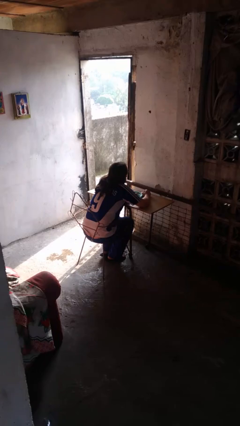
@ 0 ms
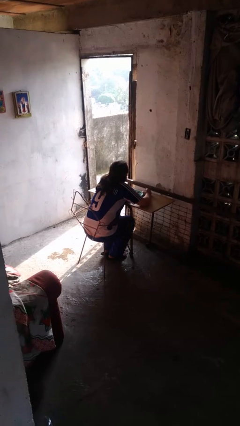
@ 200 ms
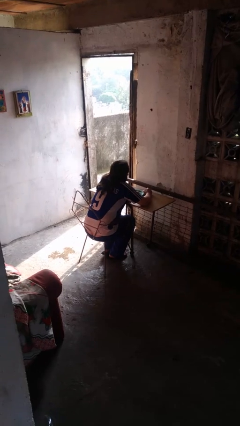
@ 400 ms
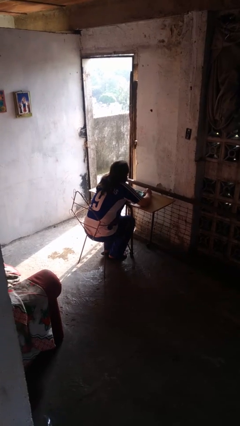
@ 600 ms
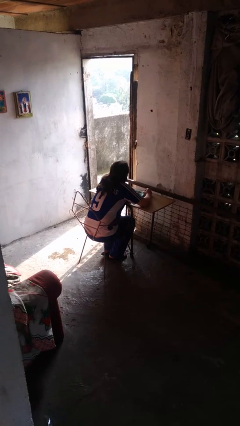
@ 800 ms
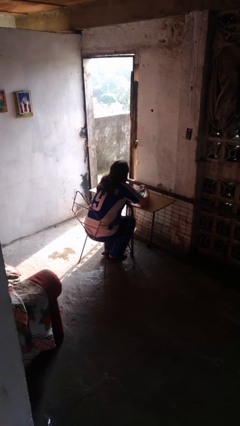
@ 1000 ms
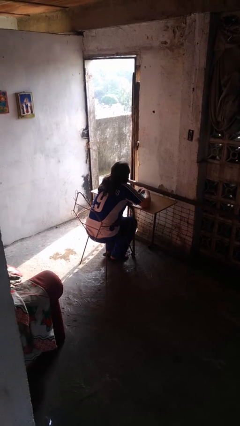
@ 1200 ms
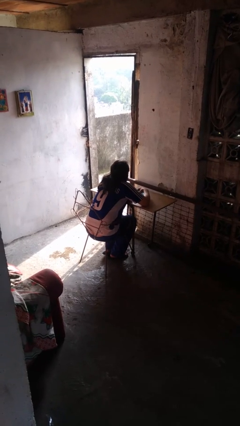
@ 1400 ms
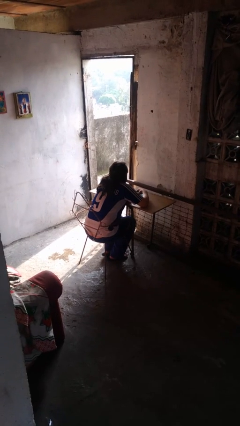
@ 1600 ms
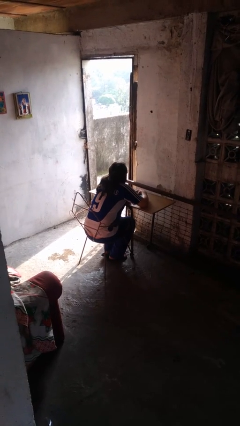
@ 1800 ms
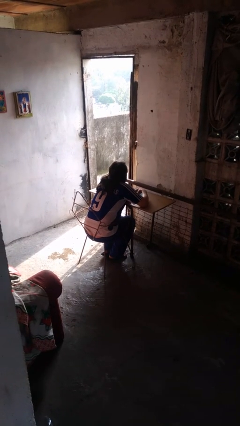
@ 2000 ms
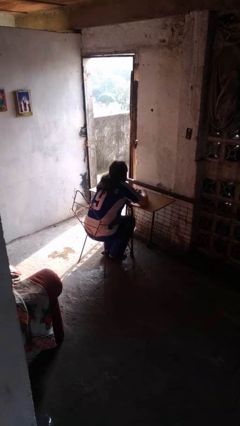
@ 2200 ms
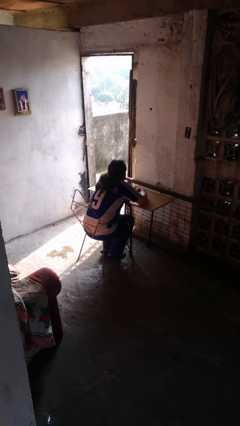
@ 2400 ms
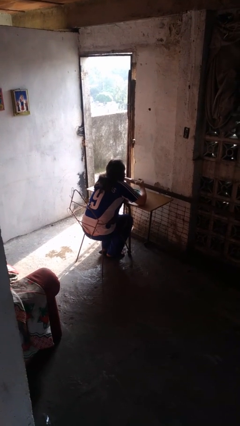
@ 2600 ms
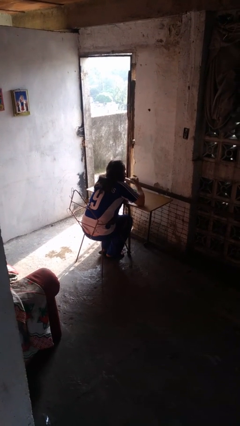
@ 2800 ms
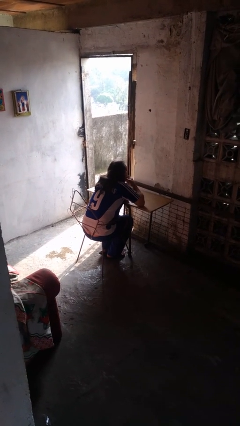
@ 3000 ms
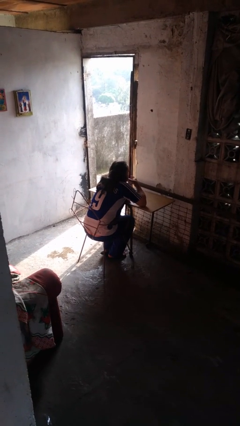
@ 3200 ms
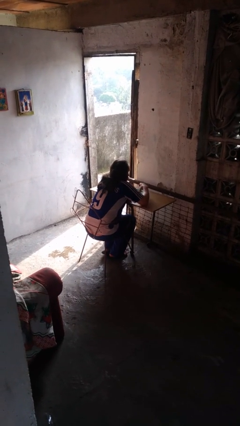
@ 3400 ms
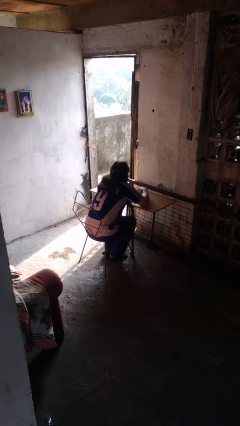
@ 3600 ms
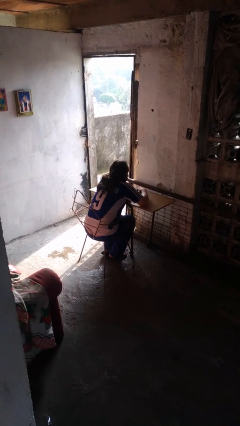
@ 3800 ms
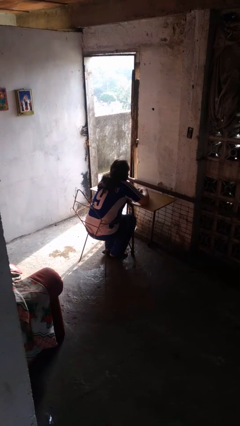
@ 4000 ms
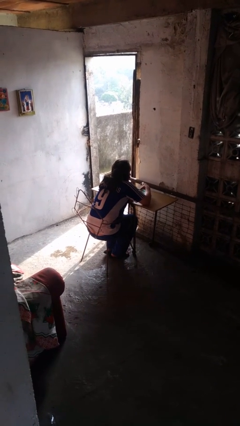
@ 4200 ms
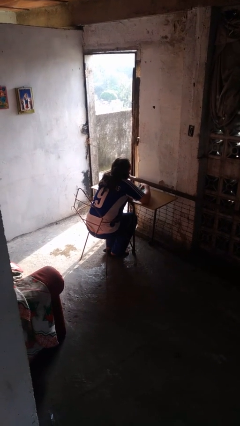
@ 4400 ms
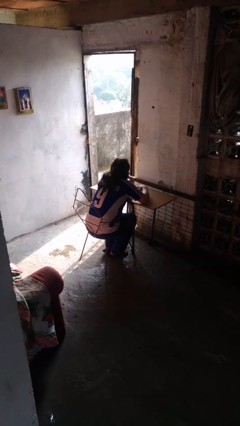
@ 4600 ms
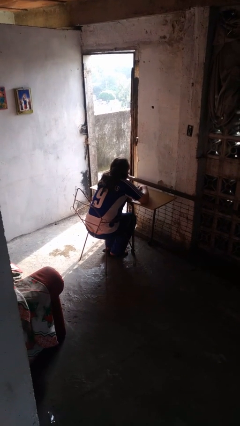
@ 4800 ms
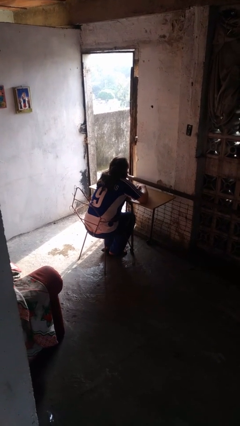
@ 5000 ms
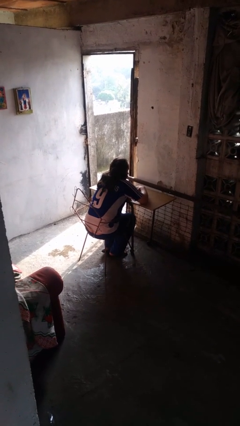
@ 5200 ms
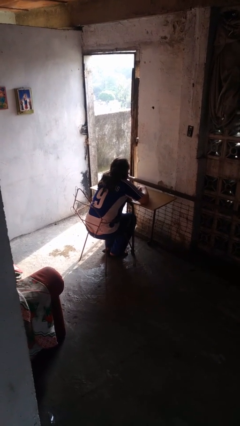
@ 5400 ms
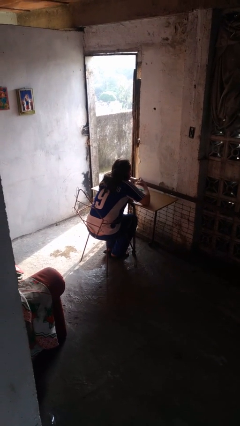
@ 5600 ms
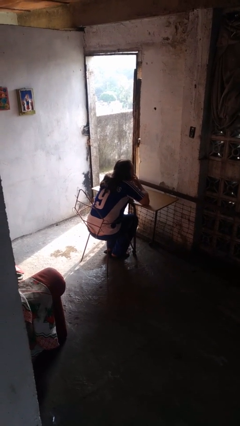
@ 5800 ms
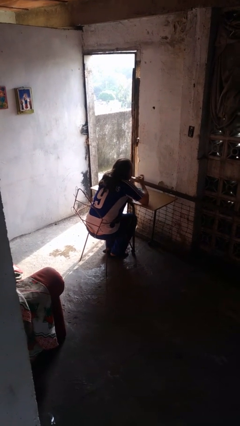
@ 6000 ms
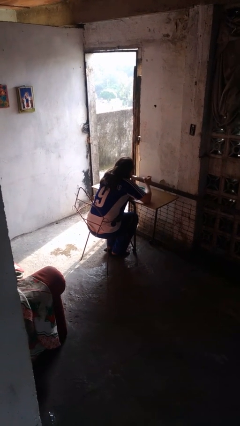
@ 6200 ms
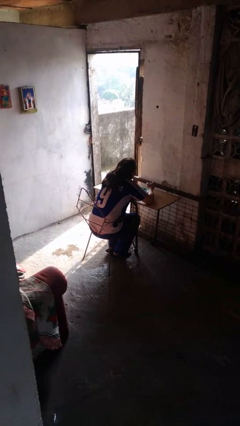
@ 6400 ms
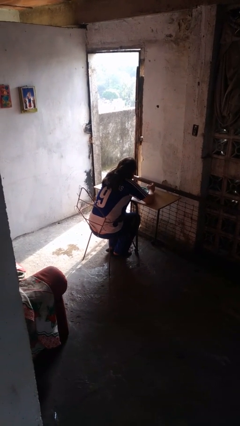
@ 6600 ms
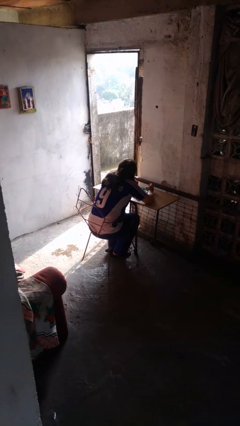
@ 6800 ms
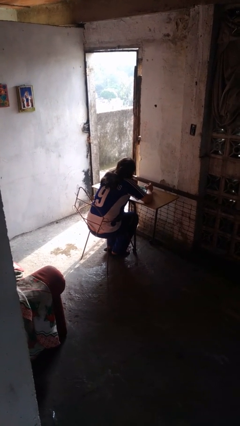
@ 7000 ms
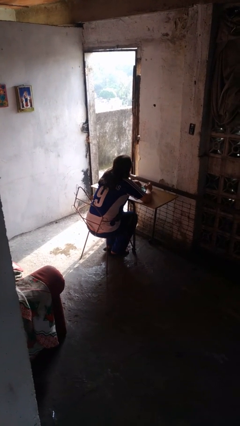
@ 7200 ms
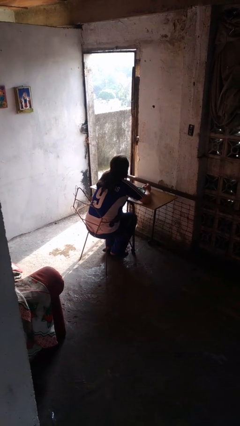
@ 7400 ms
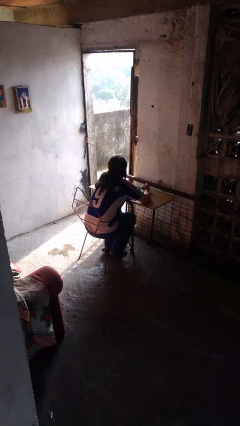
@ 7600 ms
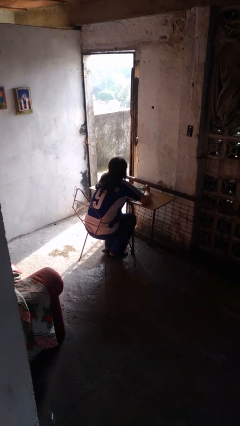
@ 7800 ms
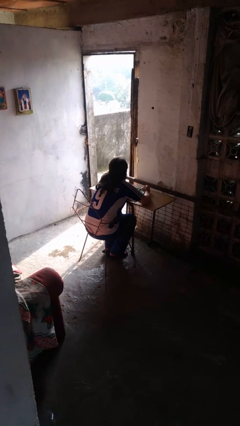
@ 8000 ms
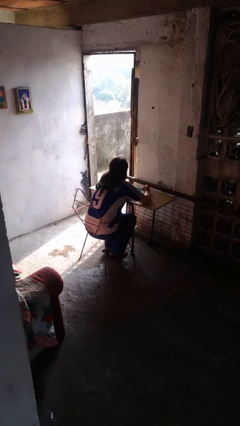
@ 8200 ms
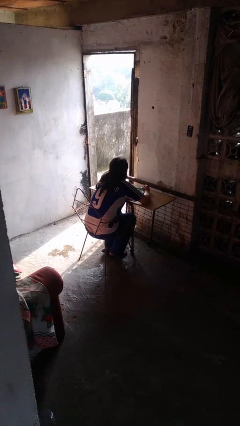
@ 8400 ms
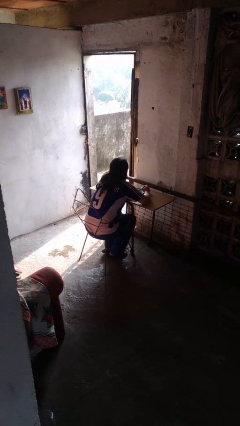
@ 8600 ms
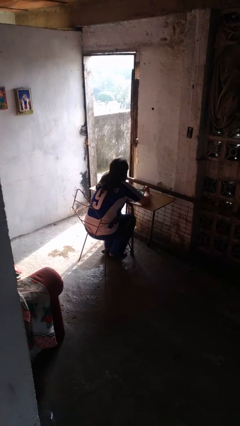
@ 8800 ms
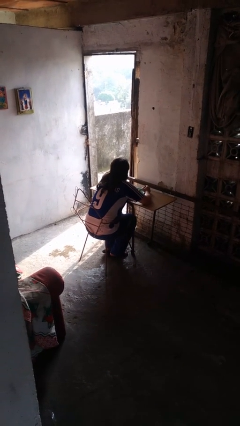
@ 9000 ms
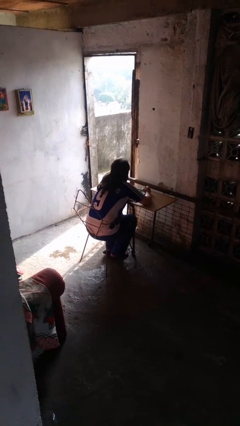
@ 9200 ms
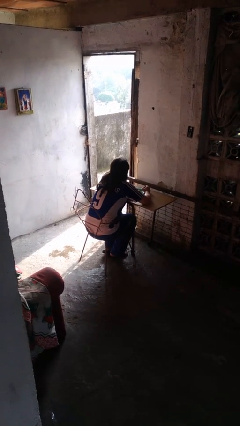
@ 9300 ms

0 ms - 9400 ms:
person eats with hands

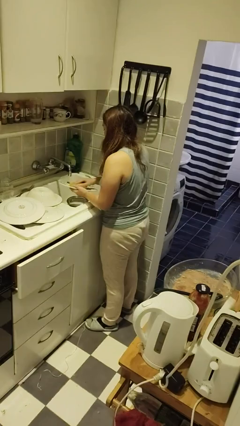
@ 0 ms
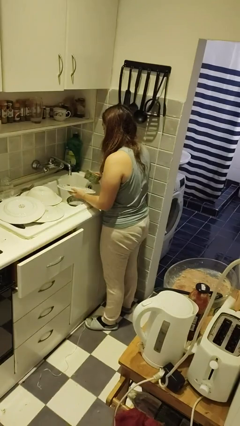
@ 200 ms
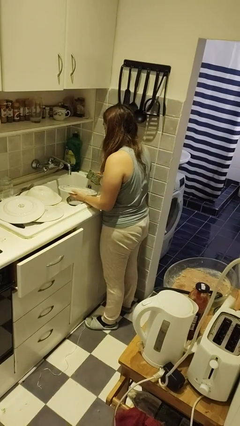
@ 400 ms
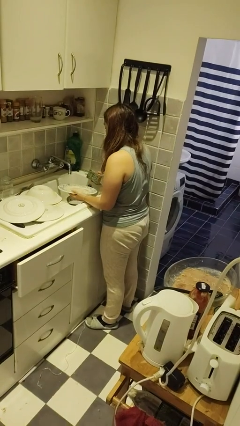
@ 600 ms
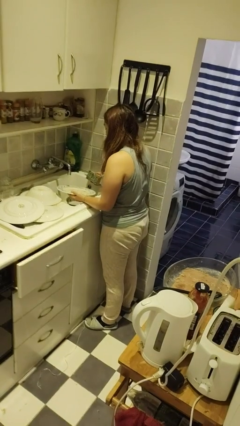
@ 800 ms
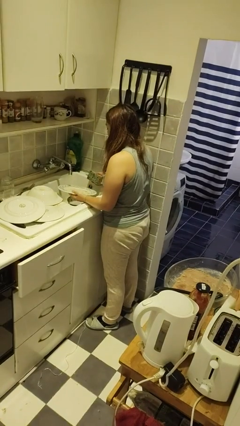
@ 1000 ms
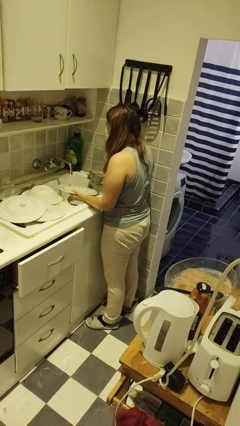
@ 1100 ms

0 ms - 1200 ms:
person washes dish

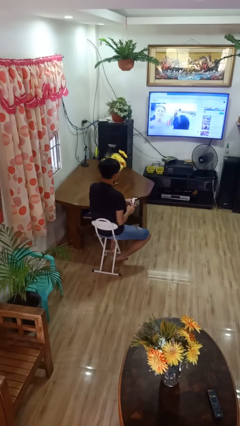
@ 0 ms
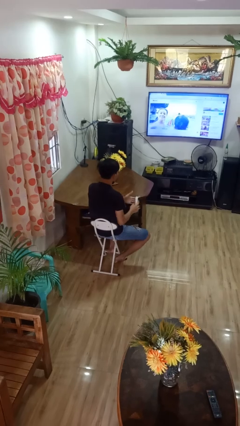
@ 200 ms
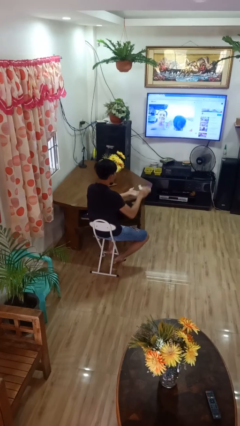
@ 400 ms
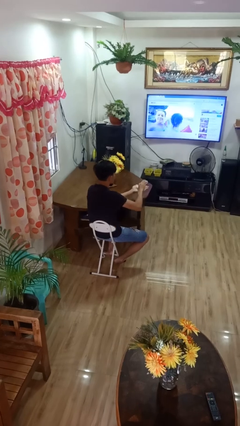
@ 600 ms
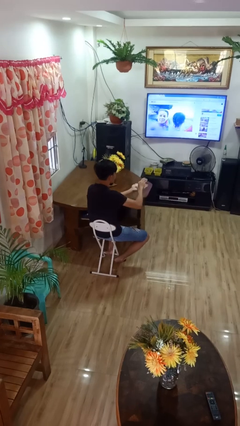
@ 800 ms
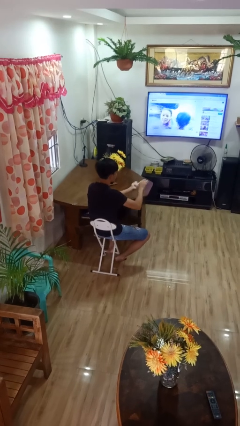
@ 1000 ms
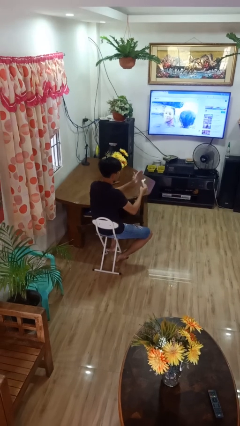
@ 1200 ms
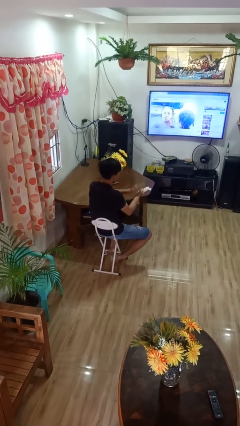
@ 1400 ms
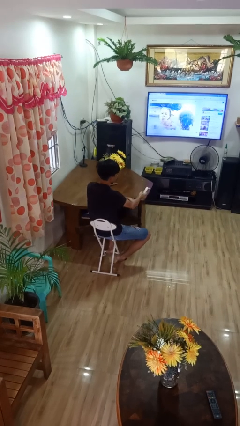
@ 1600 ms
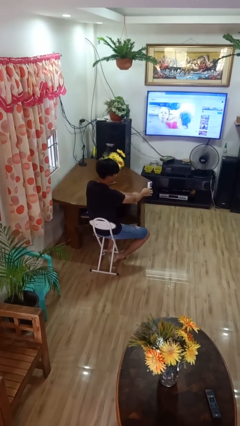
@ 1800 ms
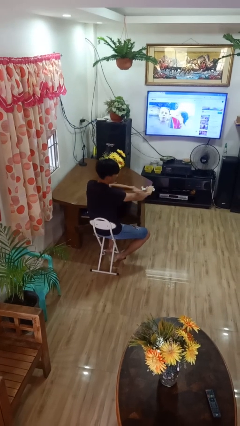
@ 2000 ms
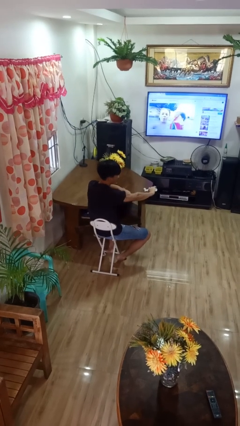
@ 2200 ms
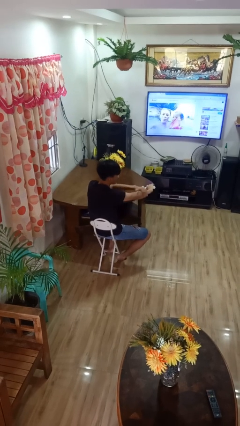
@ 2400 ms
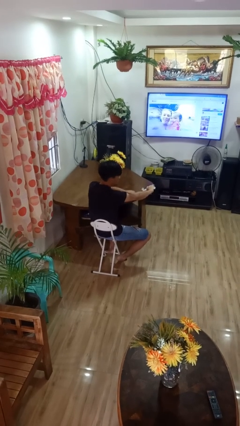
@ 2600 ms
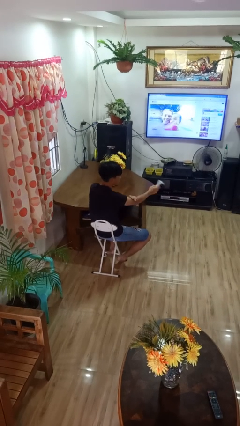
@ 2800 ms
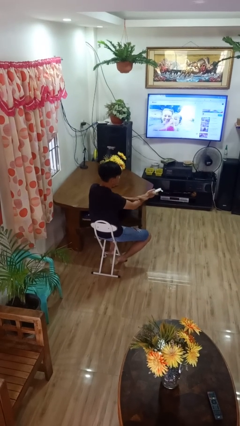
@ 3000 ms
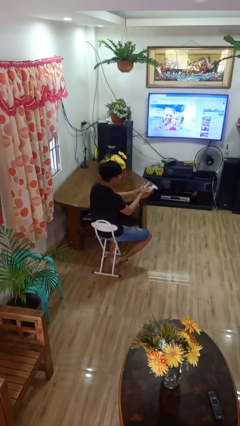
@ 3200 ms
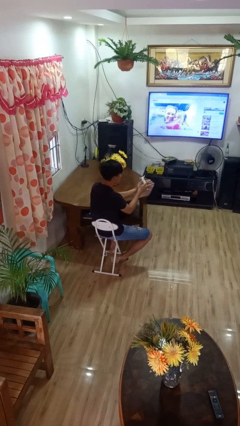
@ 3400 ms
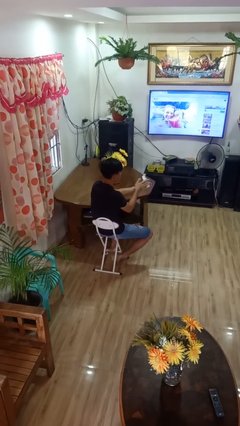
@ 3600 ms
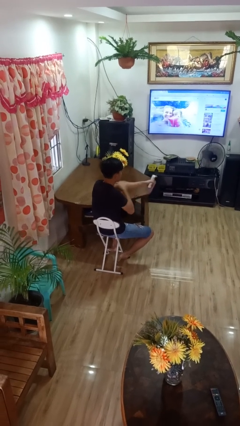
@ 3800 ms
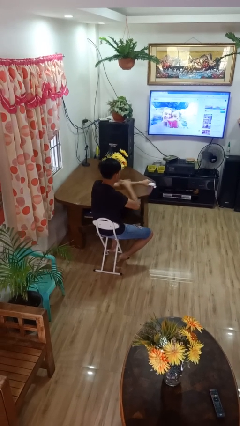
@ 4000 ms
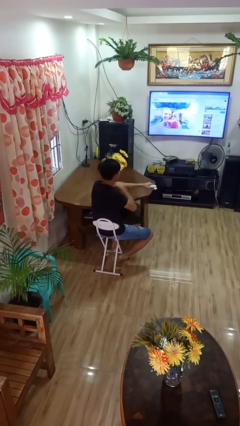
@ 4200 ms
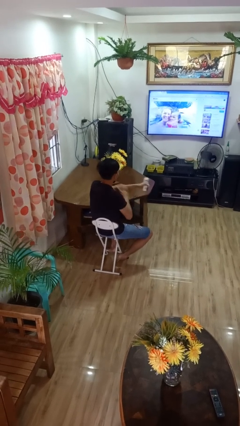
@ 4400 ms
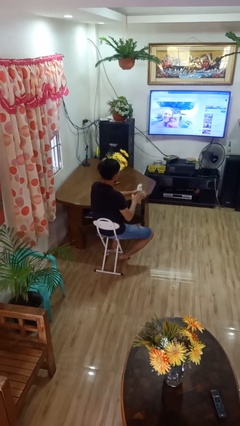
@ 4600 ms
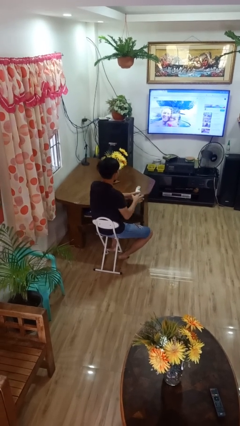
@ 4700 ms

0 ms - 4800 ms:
person applies sunscreen

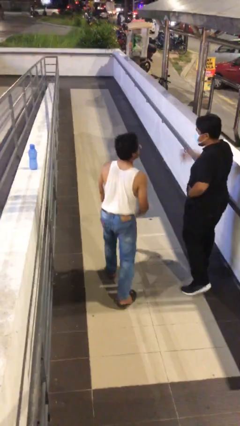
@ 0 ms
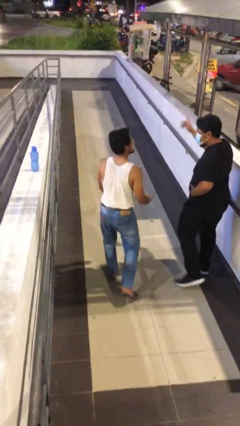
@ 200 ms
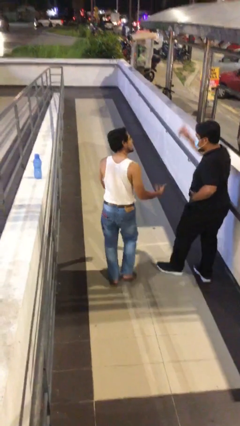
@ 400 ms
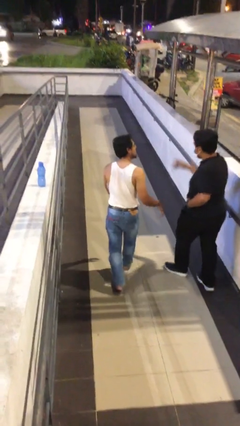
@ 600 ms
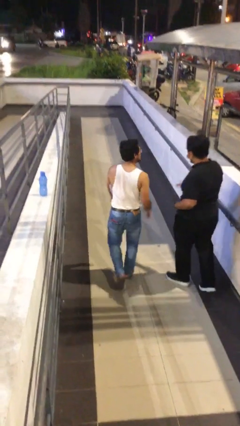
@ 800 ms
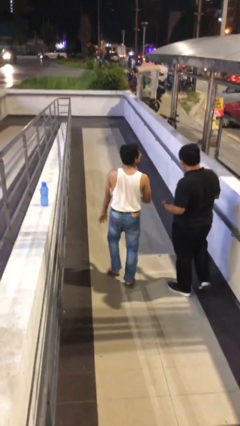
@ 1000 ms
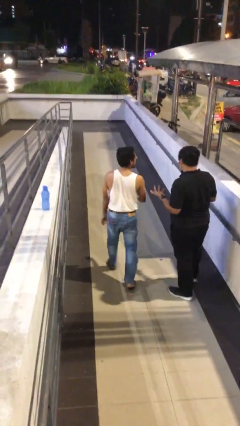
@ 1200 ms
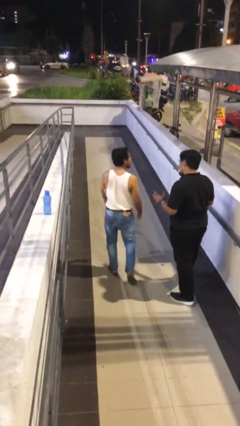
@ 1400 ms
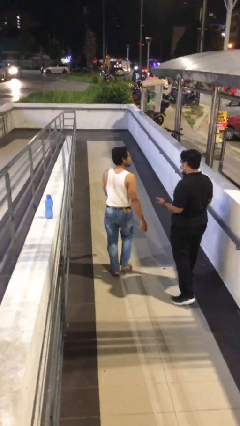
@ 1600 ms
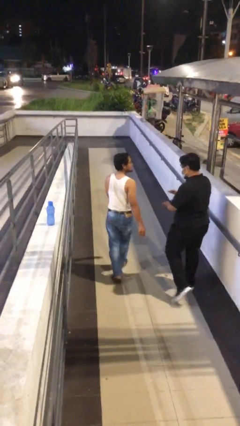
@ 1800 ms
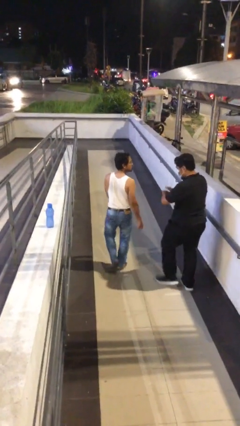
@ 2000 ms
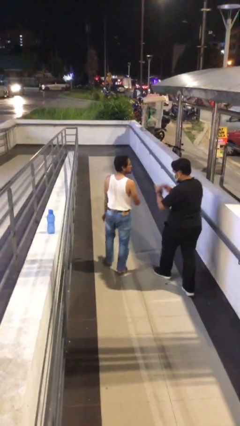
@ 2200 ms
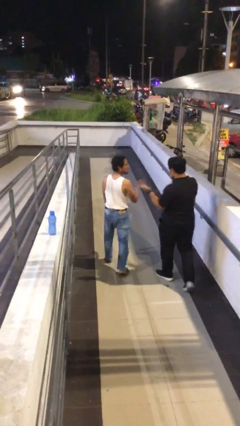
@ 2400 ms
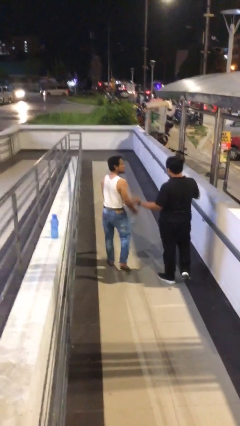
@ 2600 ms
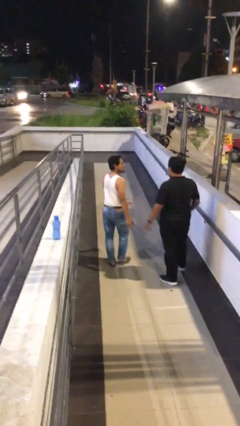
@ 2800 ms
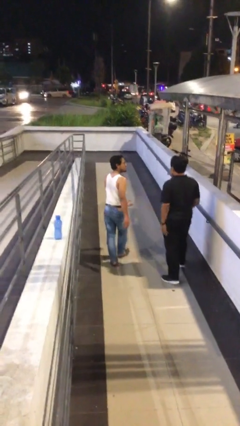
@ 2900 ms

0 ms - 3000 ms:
person talks to person
